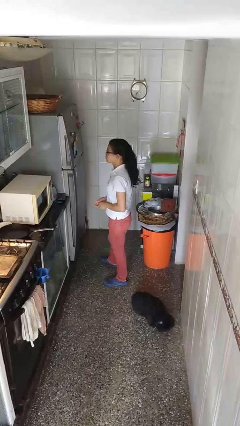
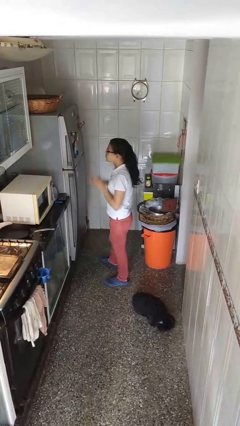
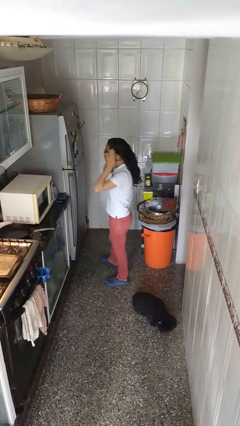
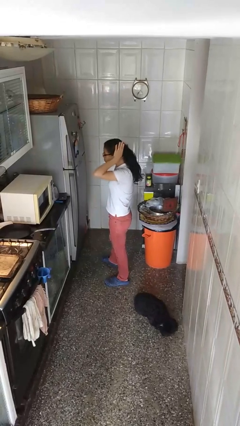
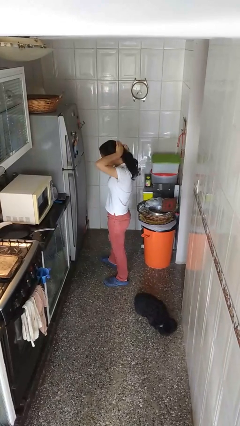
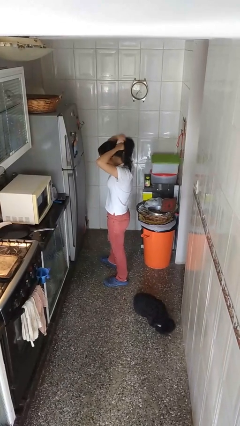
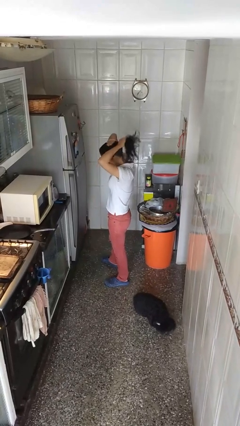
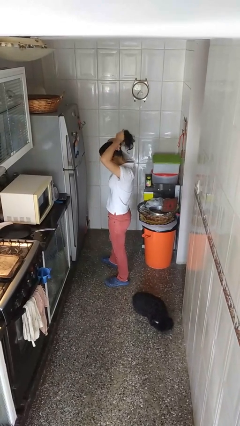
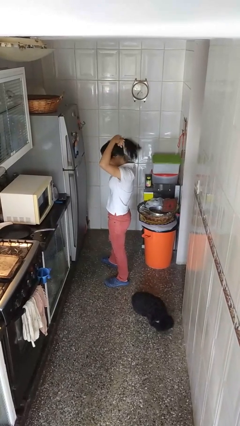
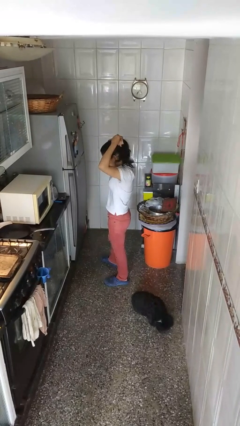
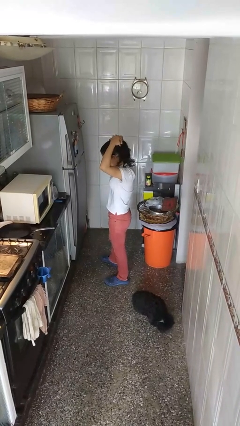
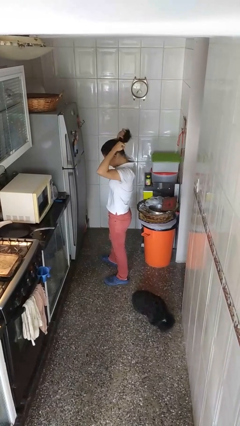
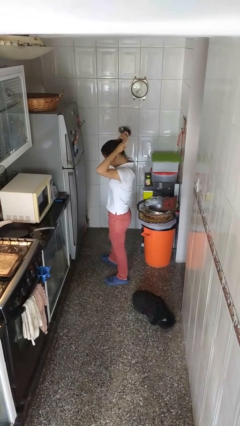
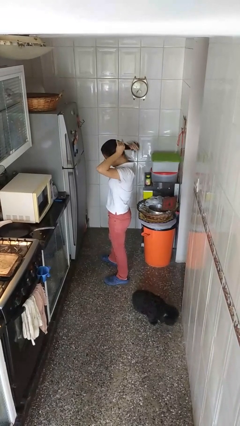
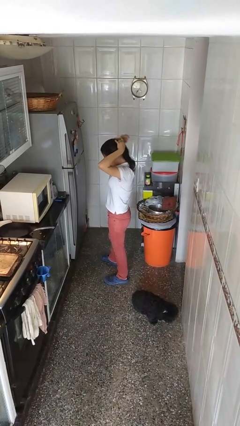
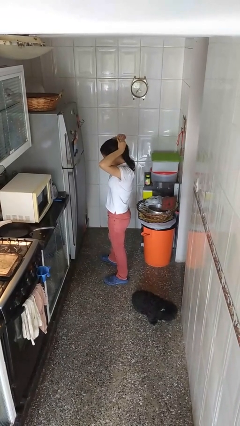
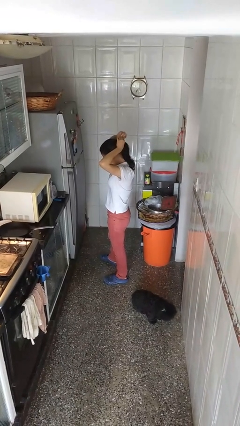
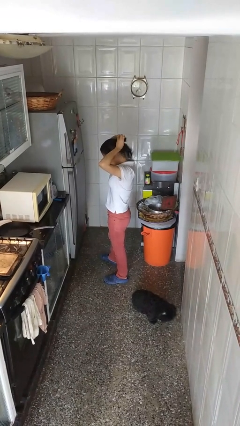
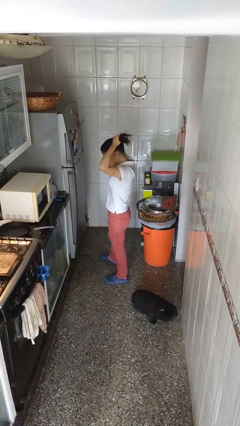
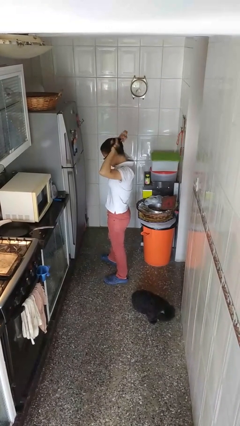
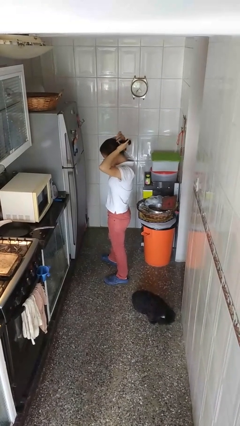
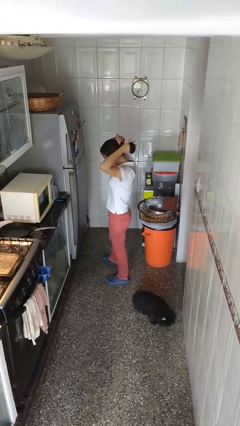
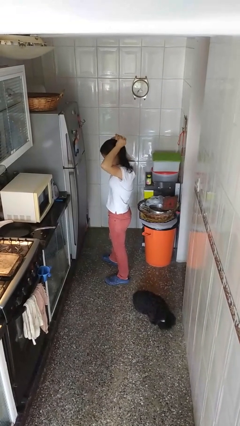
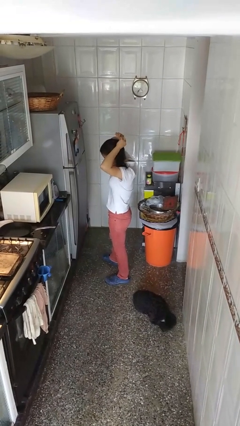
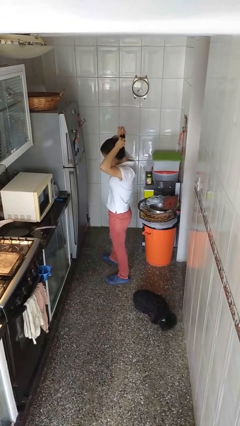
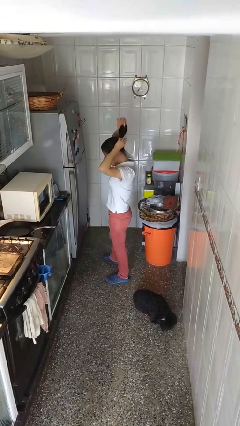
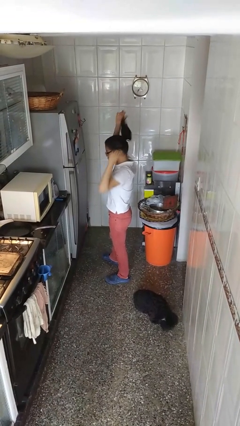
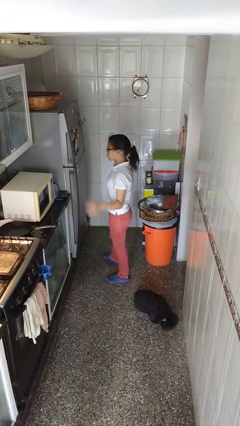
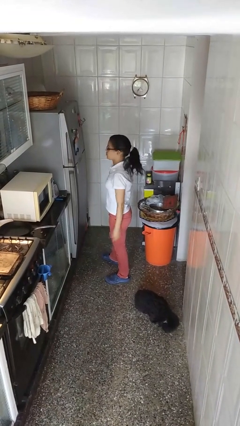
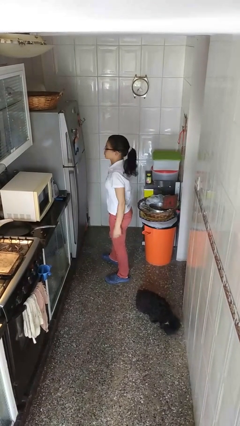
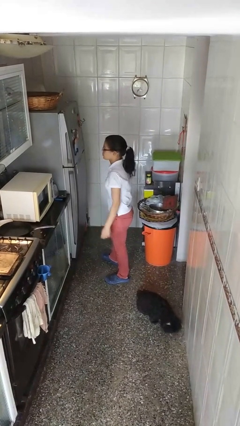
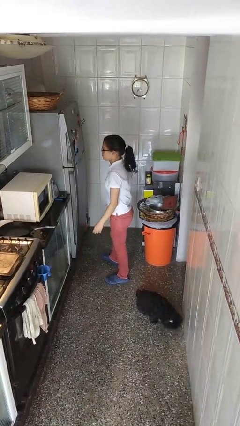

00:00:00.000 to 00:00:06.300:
person puts hair in ponytail

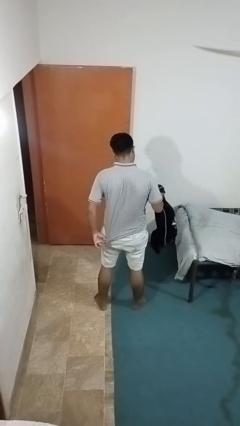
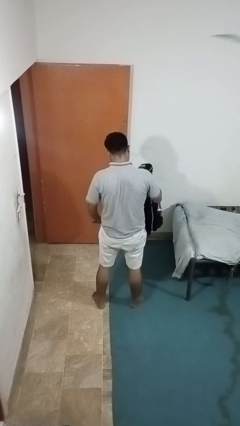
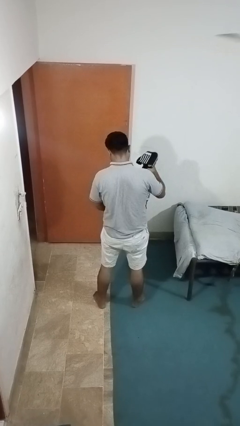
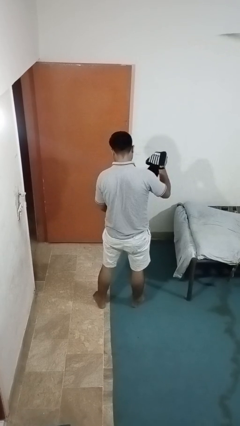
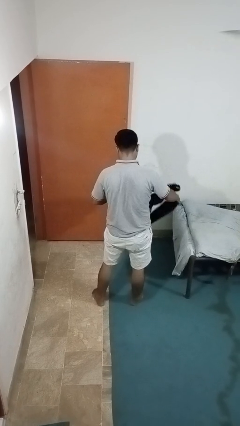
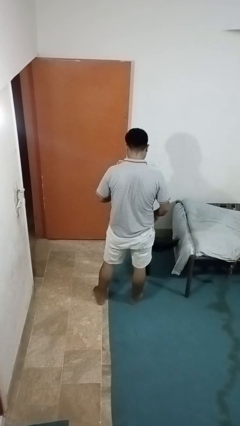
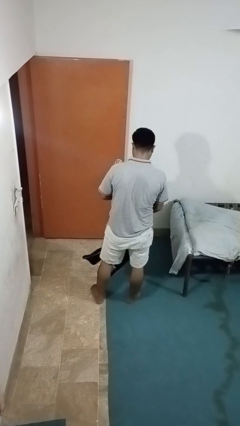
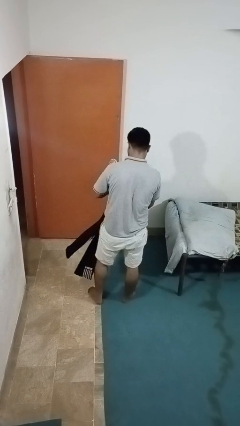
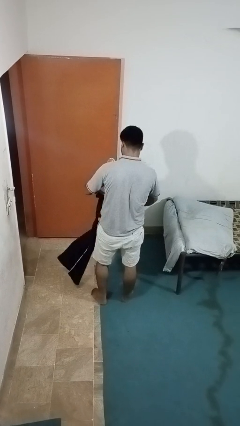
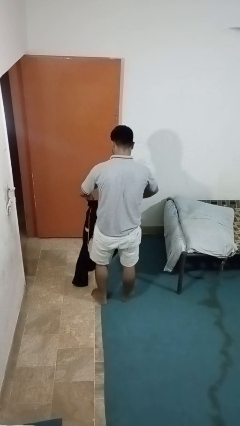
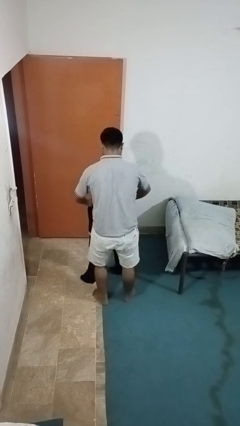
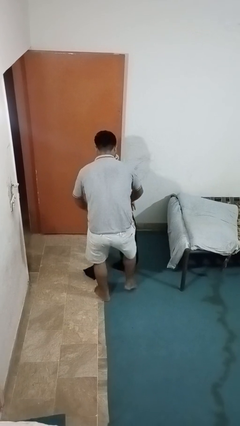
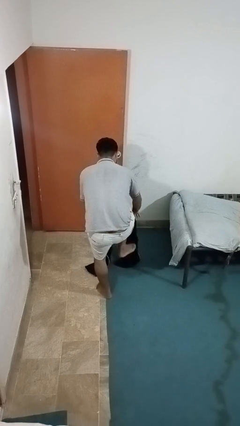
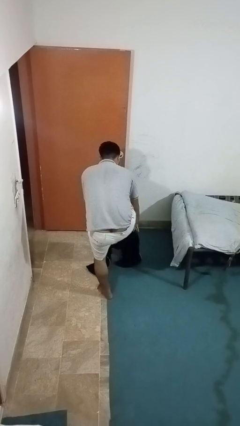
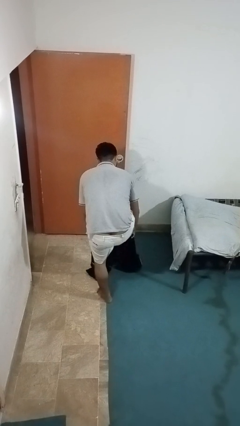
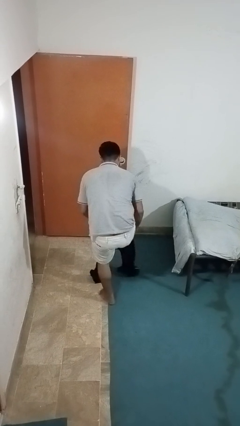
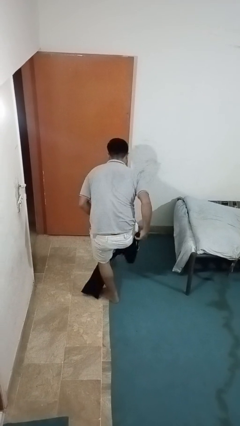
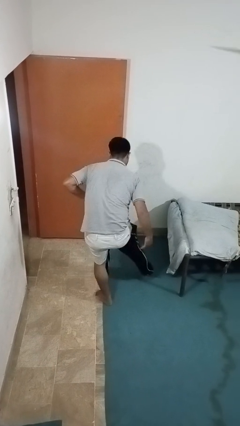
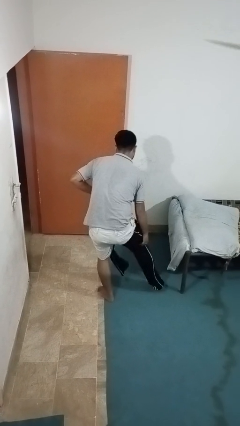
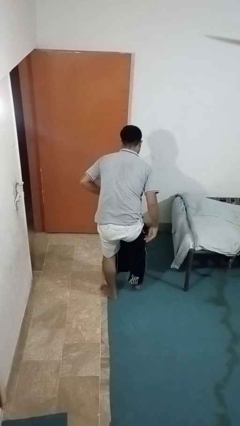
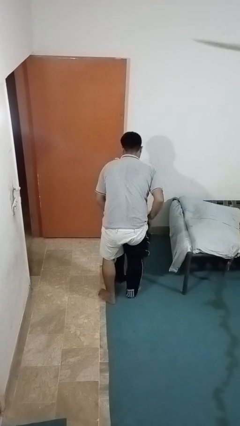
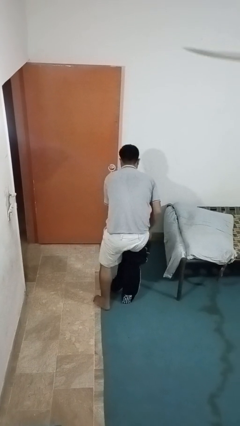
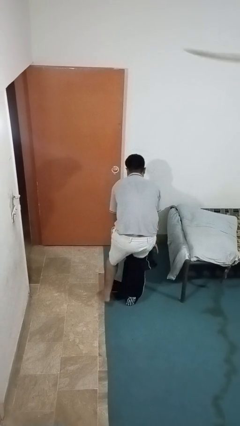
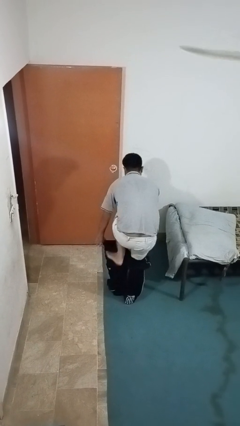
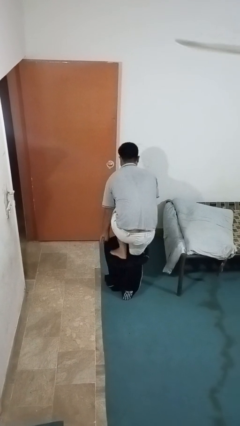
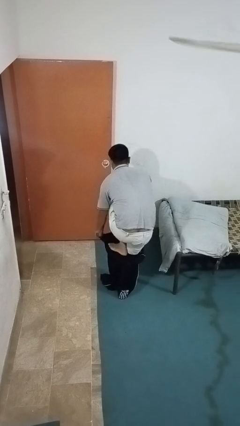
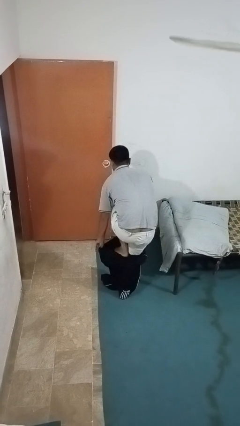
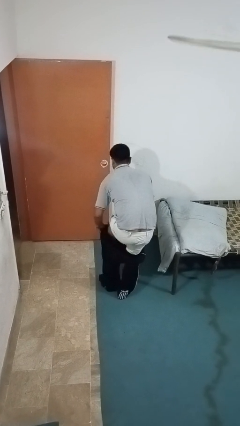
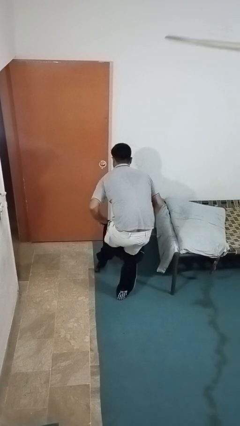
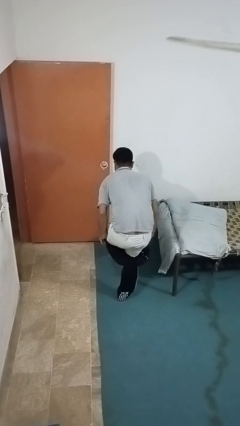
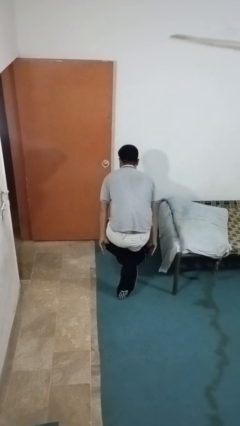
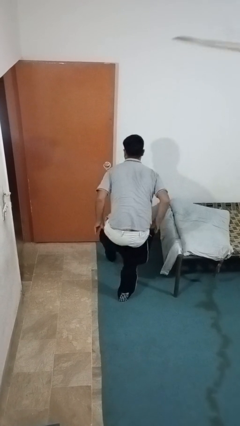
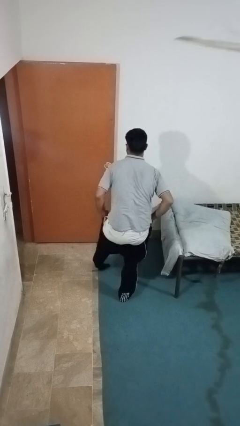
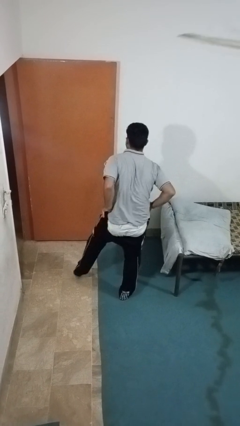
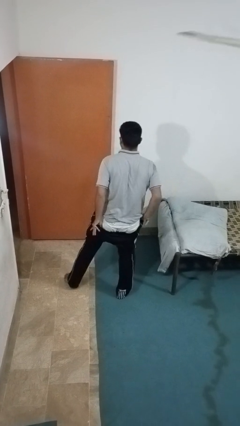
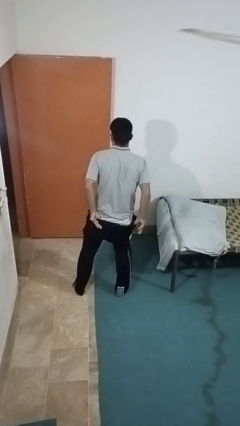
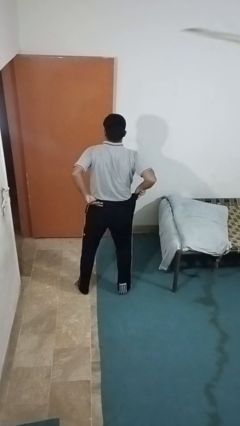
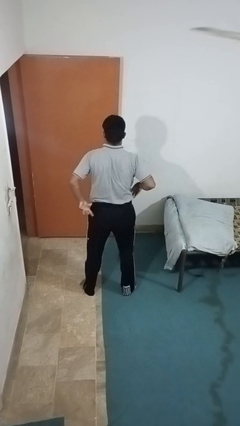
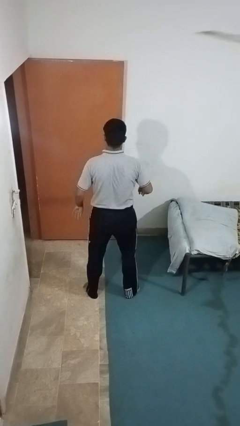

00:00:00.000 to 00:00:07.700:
person puts on pants

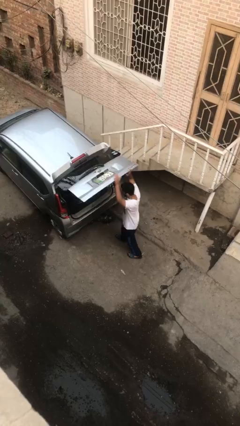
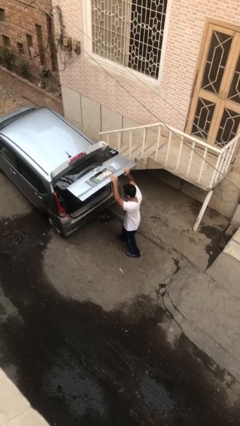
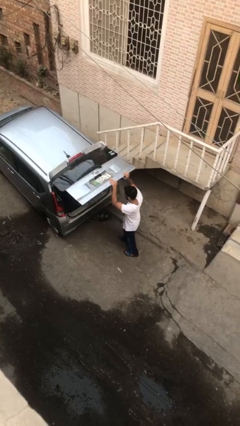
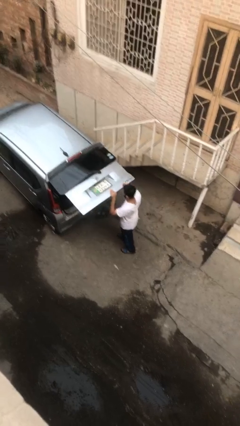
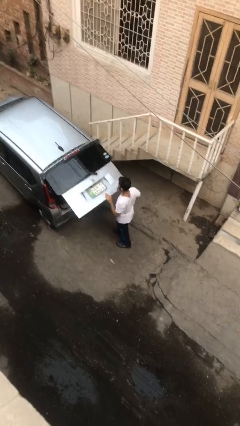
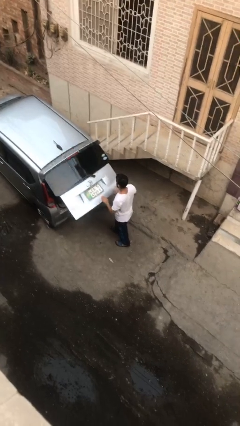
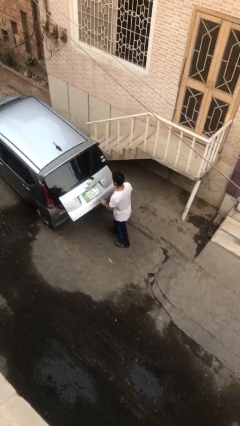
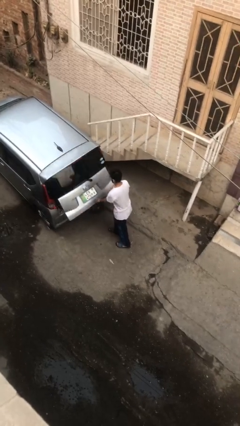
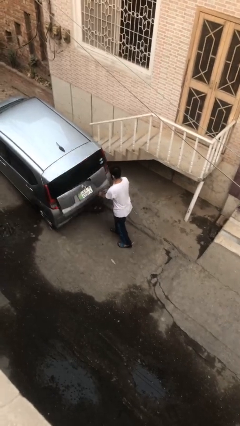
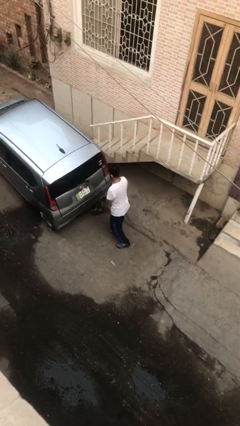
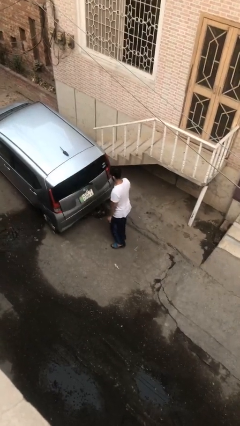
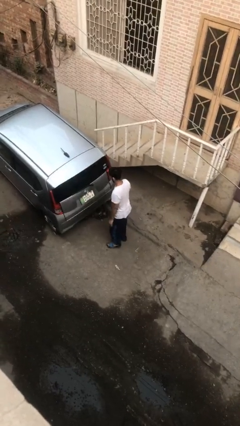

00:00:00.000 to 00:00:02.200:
person closes car trunk

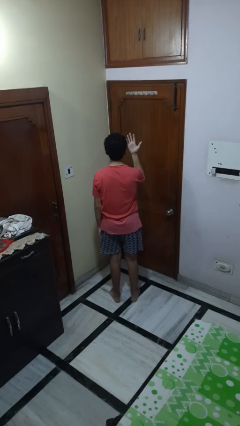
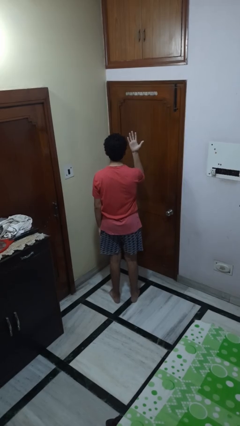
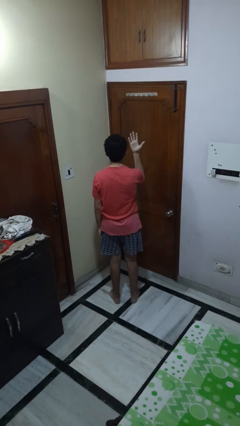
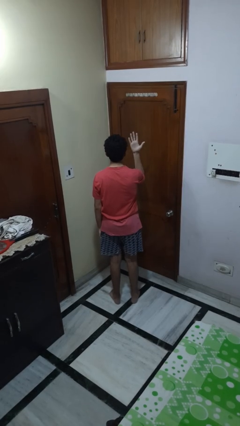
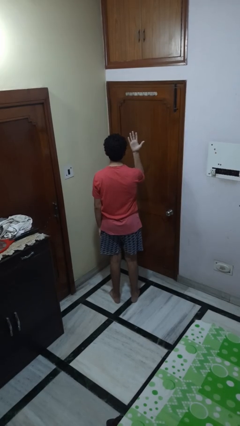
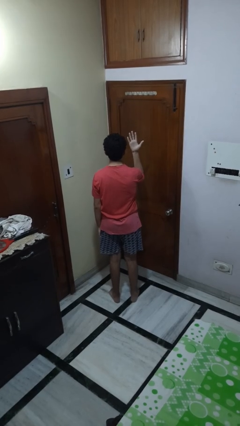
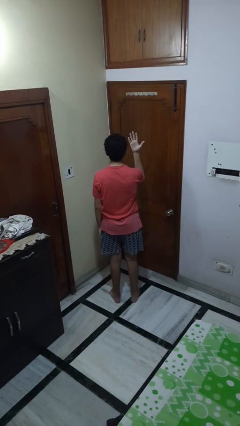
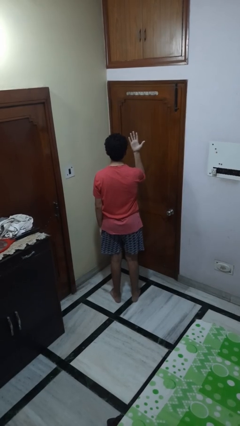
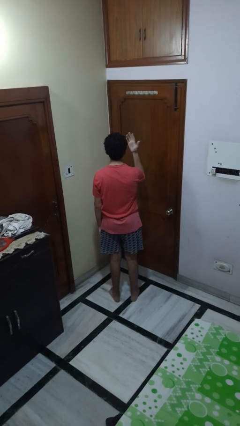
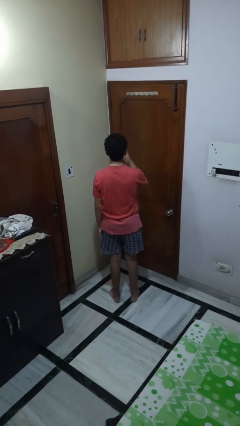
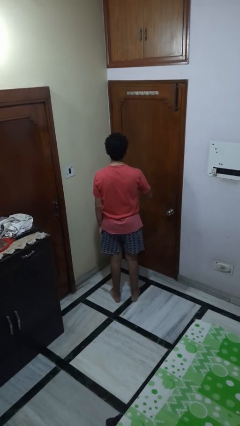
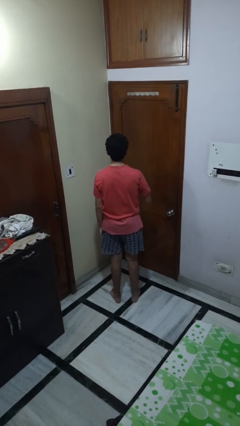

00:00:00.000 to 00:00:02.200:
person gestures number five
